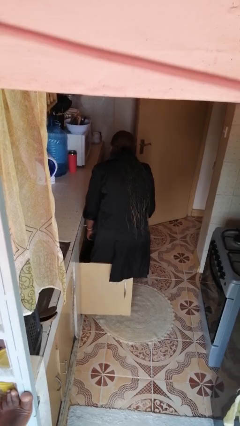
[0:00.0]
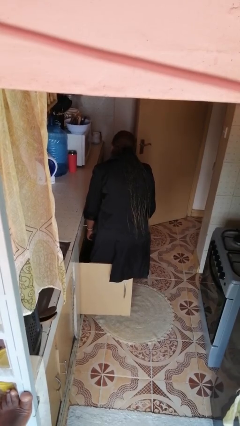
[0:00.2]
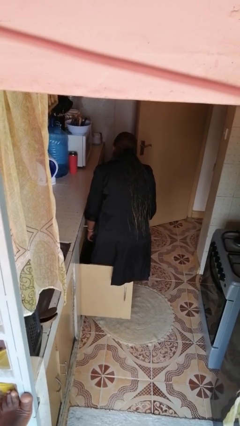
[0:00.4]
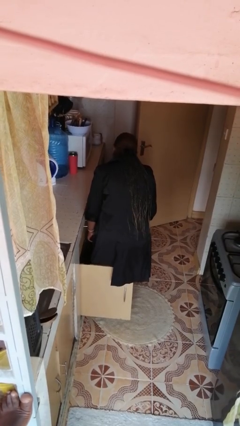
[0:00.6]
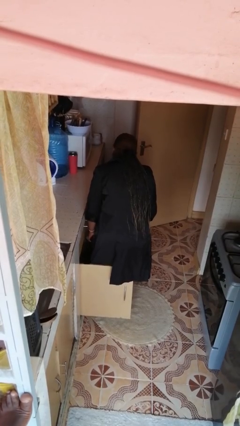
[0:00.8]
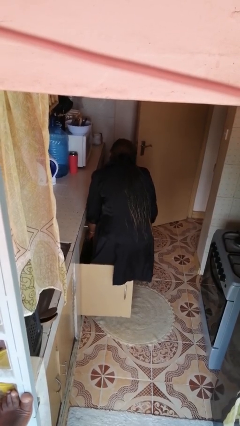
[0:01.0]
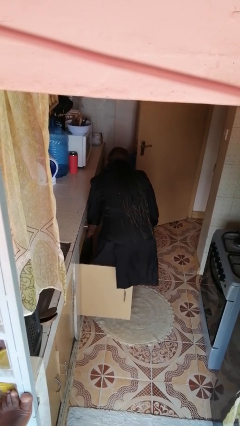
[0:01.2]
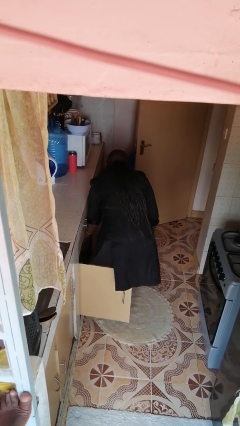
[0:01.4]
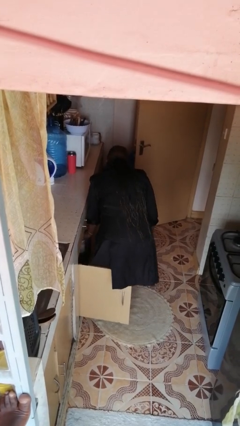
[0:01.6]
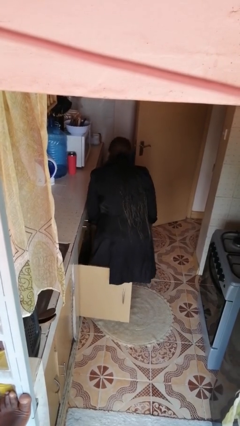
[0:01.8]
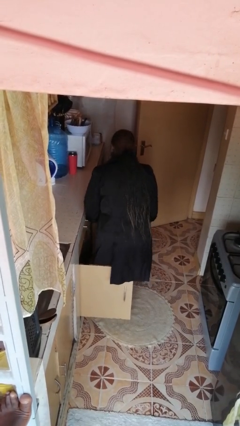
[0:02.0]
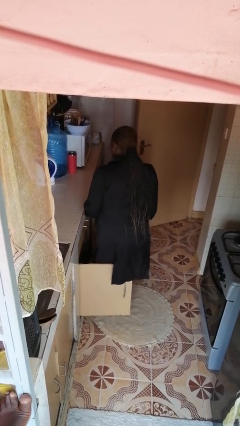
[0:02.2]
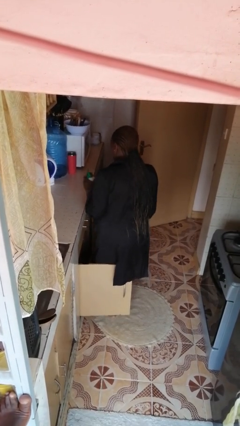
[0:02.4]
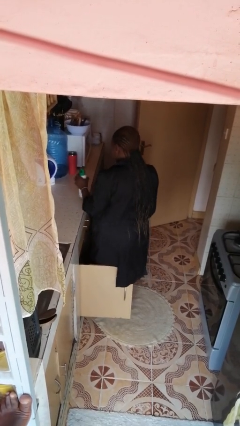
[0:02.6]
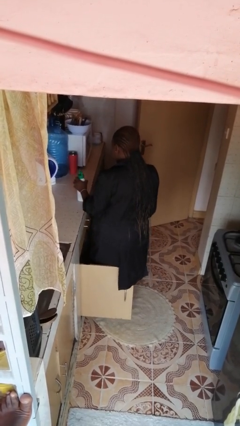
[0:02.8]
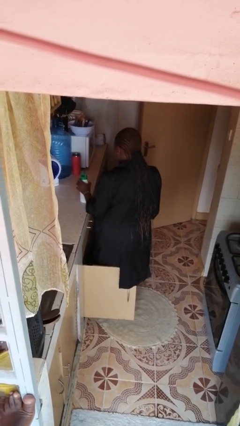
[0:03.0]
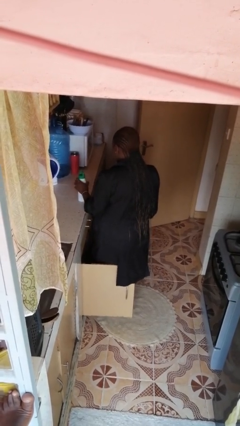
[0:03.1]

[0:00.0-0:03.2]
person takes object from cabinet

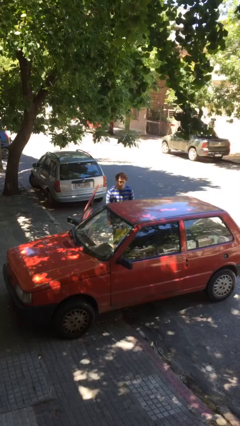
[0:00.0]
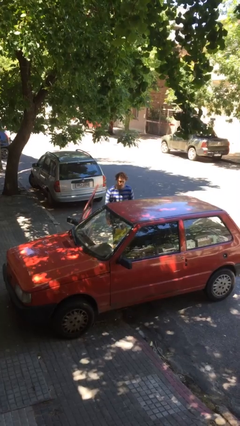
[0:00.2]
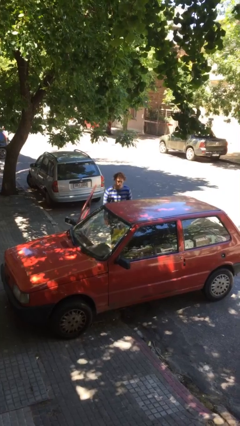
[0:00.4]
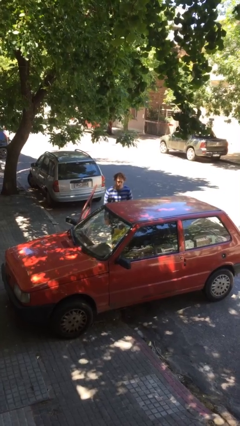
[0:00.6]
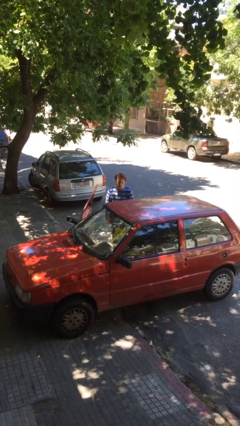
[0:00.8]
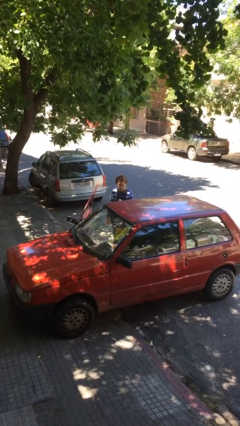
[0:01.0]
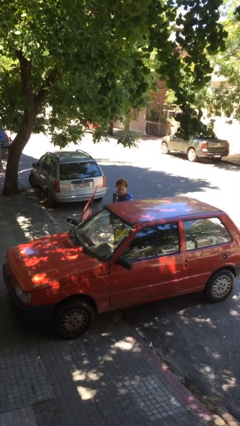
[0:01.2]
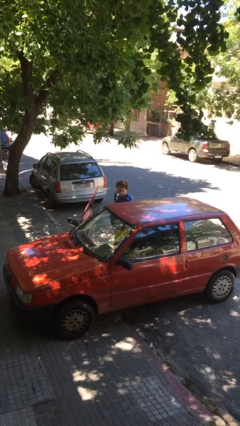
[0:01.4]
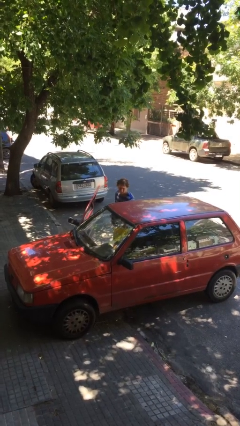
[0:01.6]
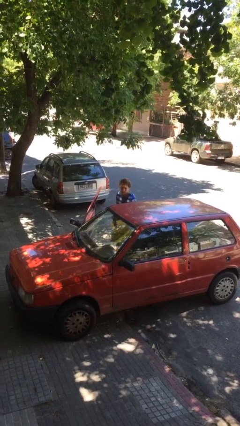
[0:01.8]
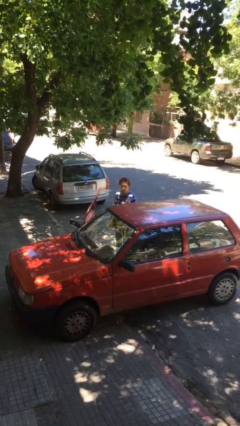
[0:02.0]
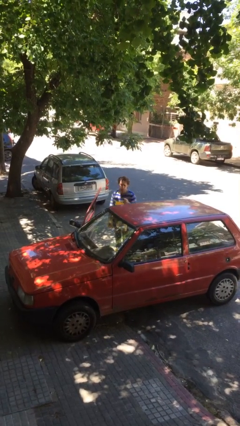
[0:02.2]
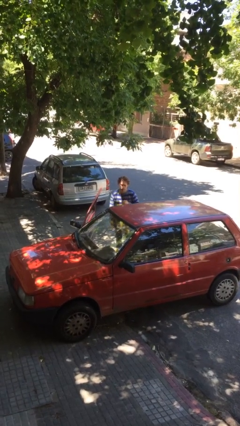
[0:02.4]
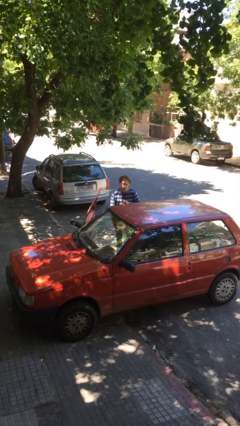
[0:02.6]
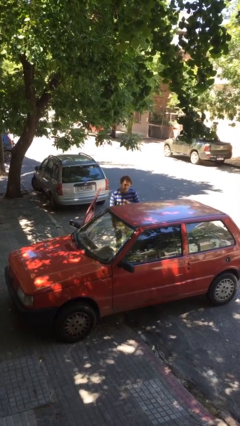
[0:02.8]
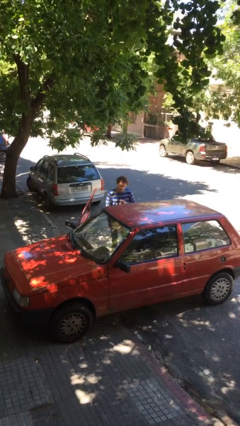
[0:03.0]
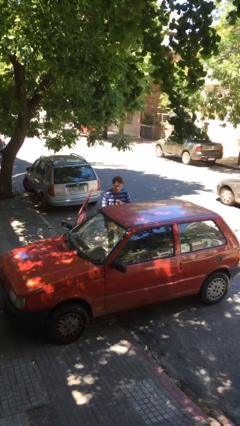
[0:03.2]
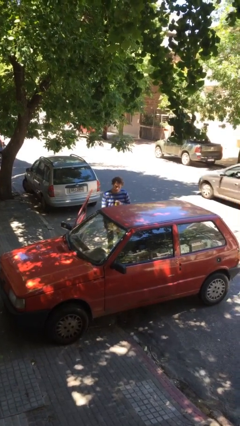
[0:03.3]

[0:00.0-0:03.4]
person unloads car

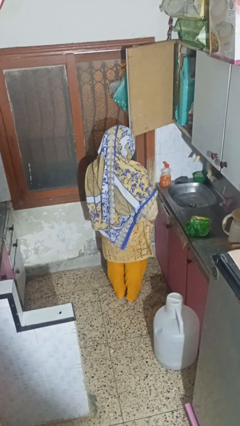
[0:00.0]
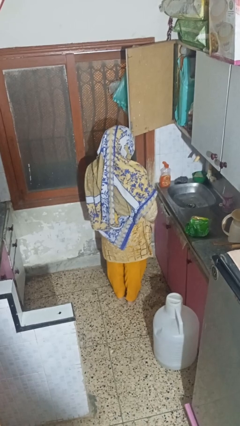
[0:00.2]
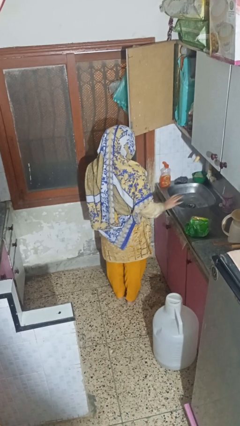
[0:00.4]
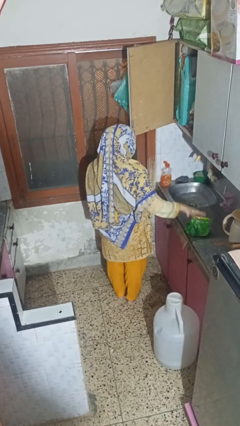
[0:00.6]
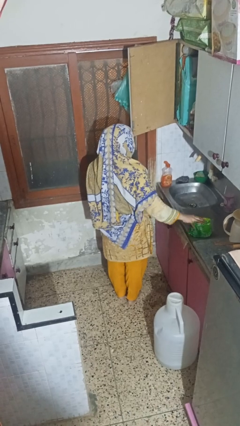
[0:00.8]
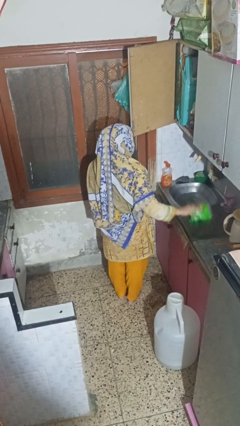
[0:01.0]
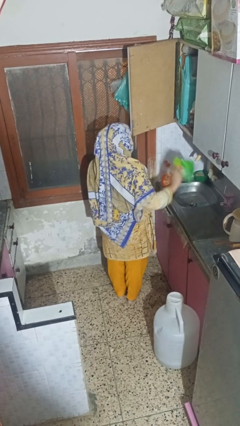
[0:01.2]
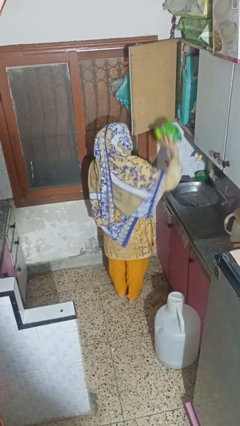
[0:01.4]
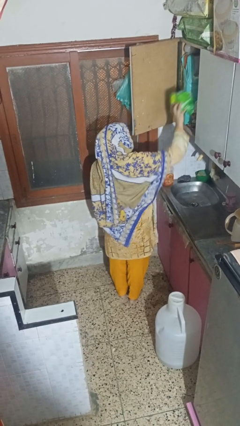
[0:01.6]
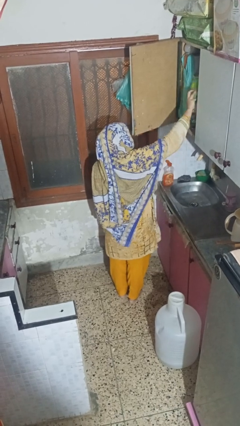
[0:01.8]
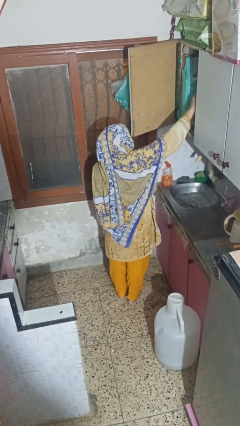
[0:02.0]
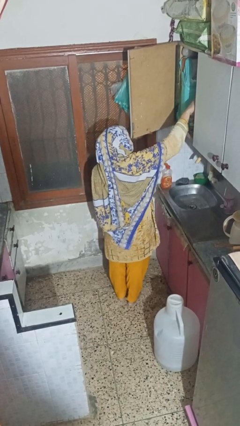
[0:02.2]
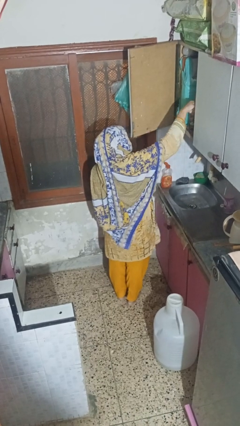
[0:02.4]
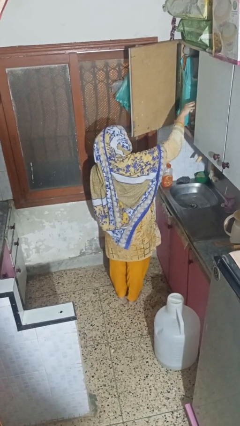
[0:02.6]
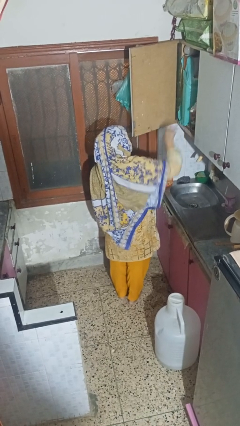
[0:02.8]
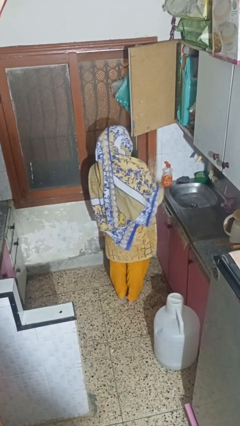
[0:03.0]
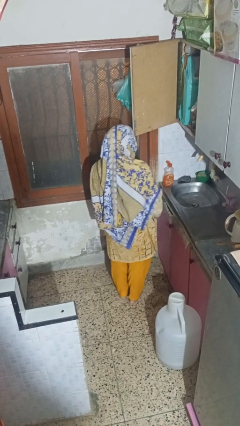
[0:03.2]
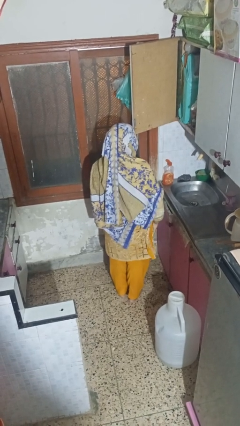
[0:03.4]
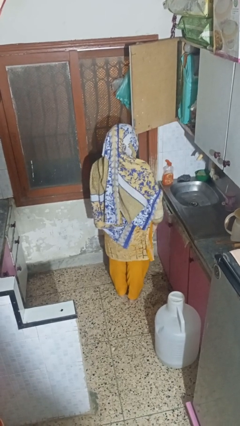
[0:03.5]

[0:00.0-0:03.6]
person puts object in cabinet

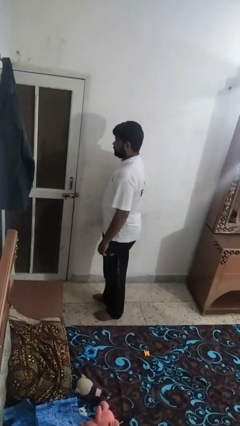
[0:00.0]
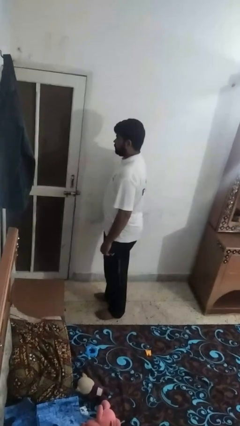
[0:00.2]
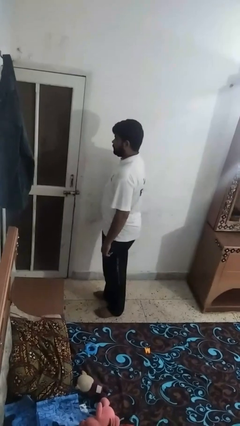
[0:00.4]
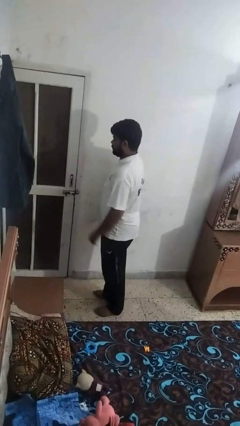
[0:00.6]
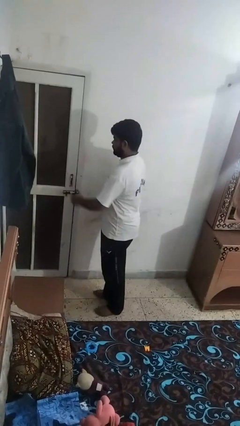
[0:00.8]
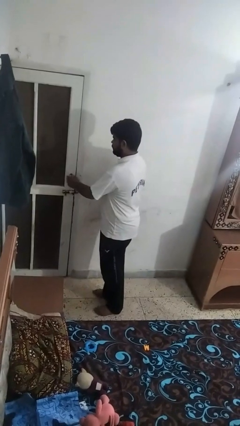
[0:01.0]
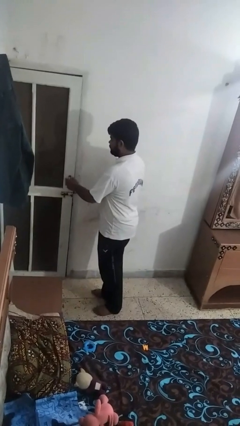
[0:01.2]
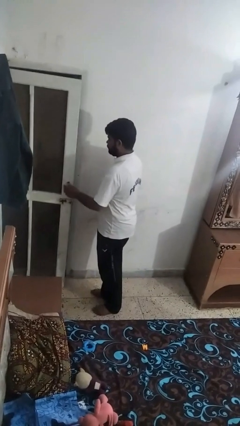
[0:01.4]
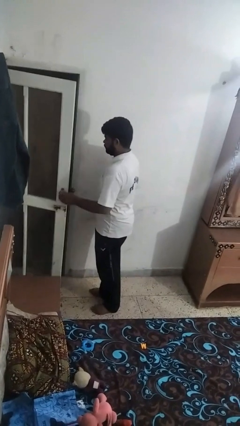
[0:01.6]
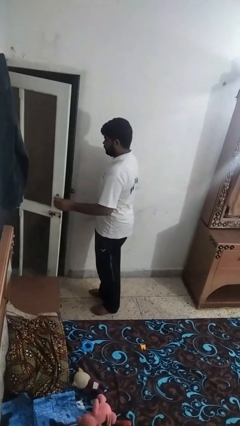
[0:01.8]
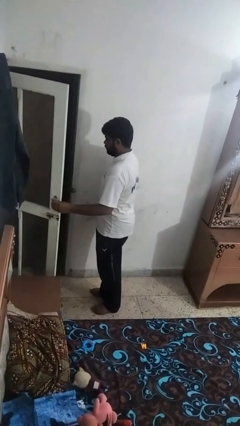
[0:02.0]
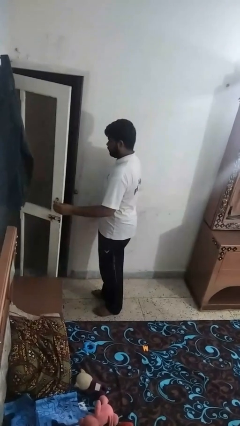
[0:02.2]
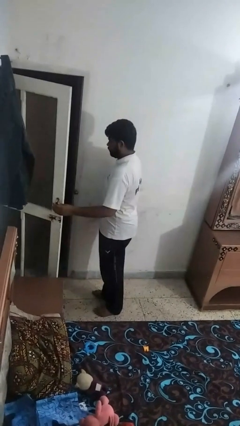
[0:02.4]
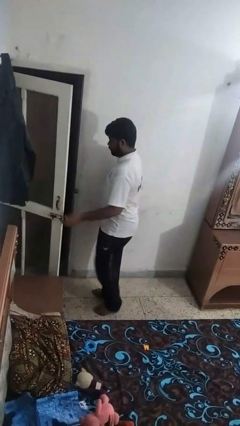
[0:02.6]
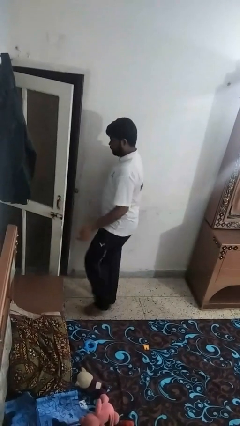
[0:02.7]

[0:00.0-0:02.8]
person opens facility door

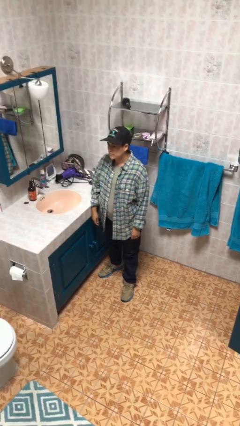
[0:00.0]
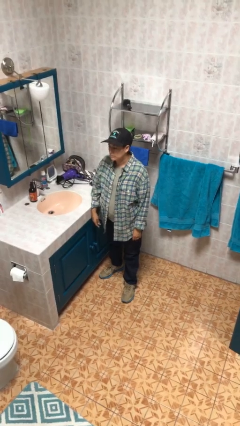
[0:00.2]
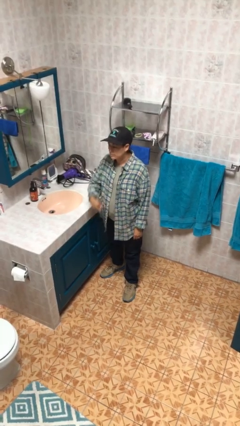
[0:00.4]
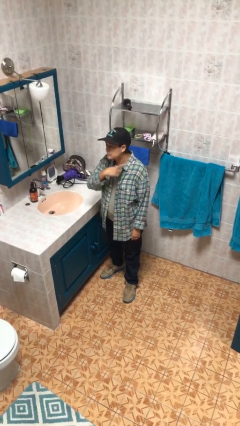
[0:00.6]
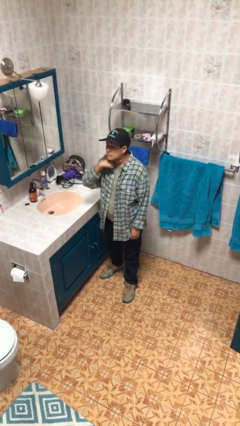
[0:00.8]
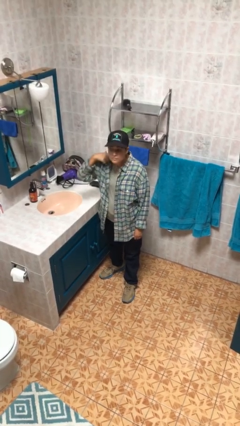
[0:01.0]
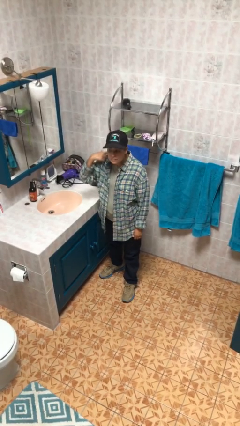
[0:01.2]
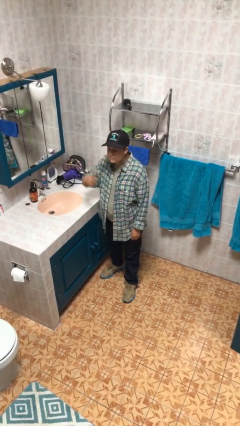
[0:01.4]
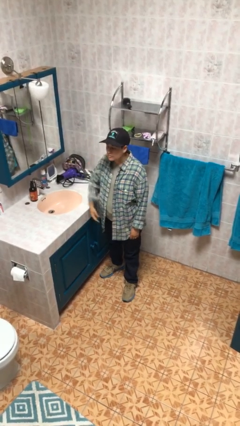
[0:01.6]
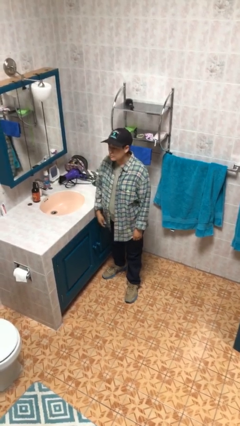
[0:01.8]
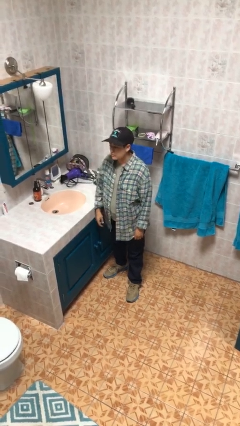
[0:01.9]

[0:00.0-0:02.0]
person gestures cut

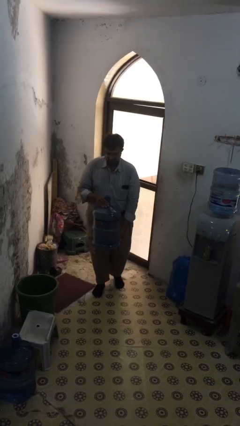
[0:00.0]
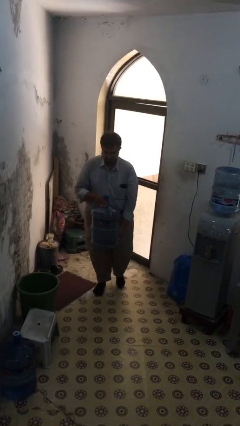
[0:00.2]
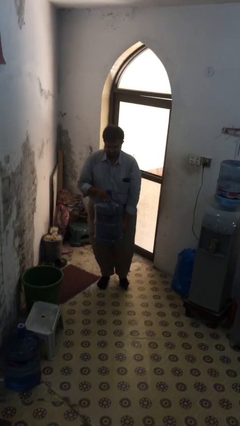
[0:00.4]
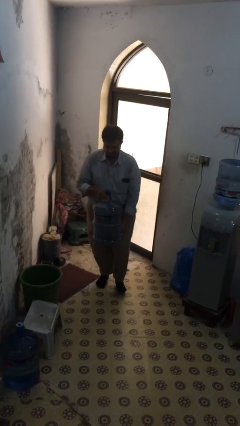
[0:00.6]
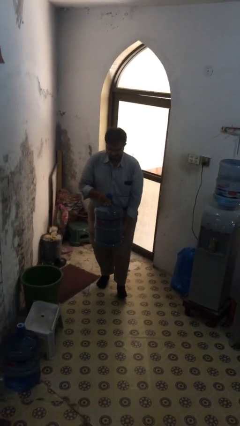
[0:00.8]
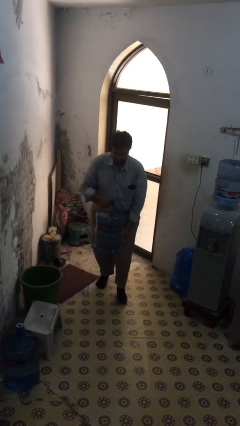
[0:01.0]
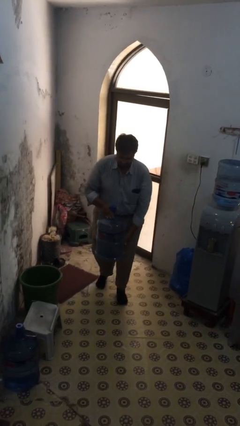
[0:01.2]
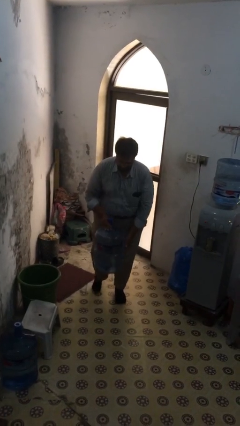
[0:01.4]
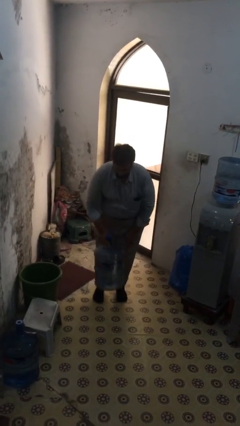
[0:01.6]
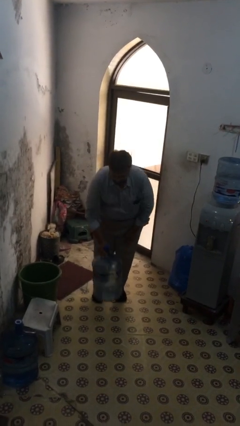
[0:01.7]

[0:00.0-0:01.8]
person puts down object on floor
